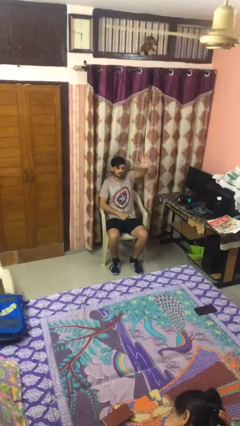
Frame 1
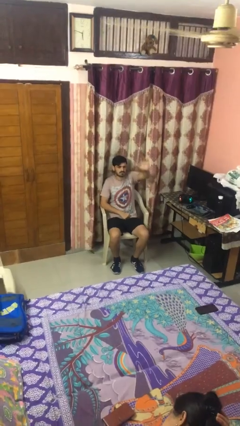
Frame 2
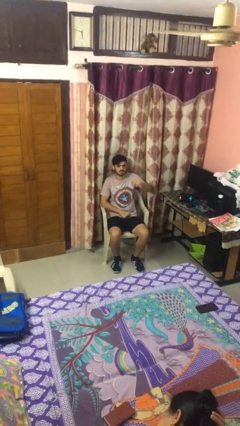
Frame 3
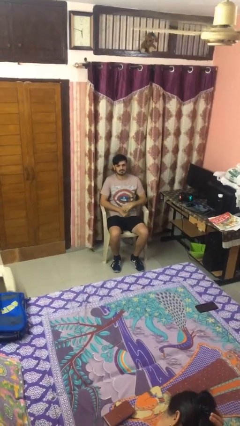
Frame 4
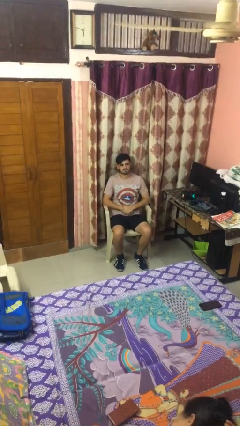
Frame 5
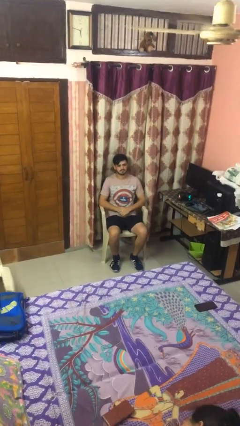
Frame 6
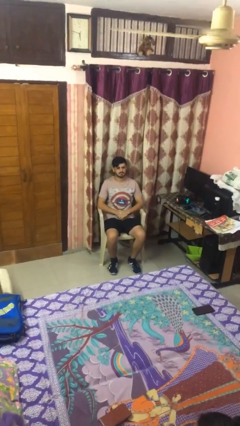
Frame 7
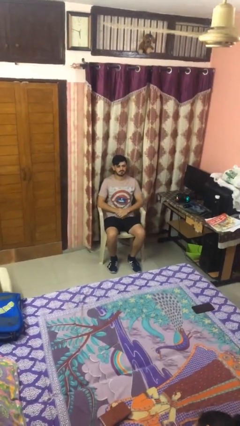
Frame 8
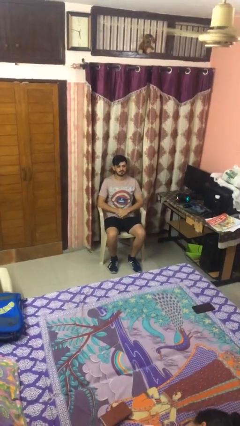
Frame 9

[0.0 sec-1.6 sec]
person gestures lower hand

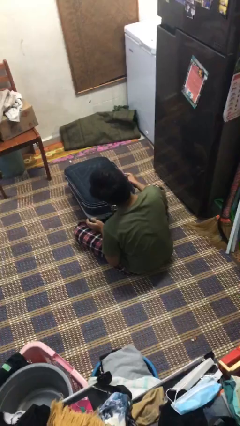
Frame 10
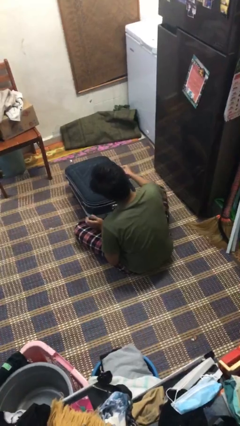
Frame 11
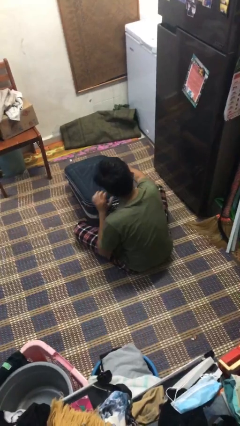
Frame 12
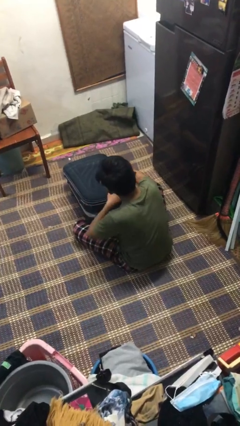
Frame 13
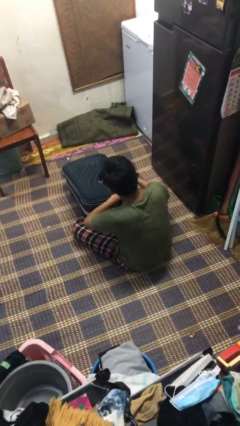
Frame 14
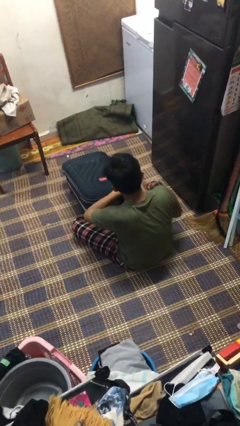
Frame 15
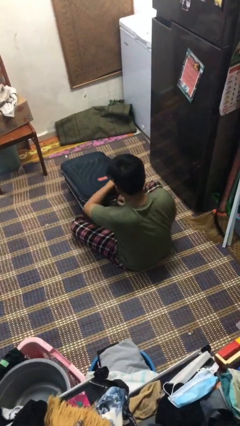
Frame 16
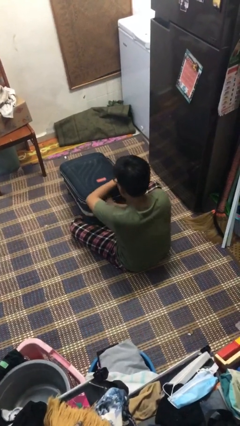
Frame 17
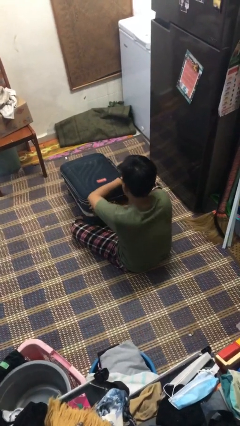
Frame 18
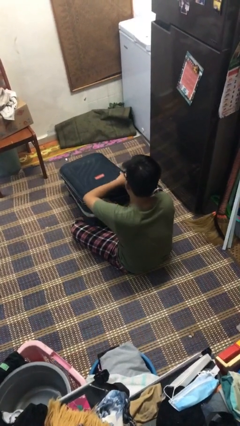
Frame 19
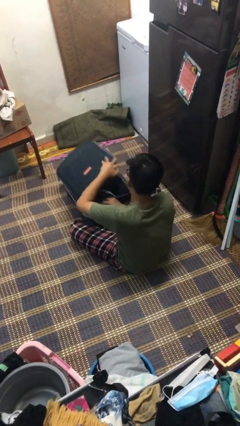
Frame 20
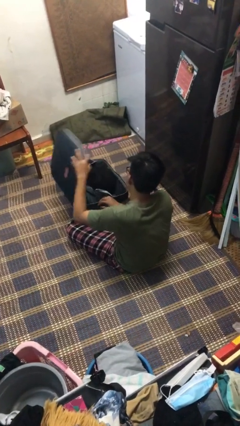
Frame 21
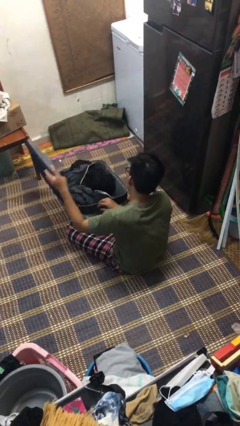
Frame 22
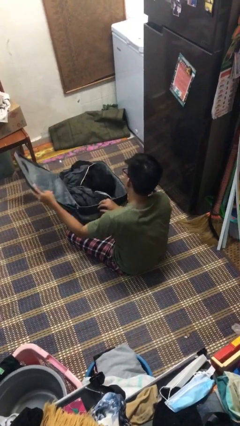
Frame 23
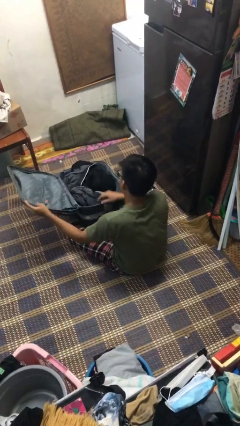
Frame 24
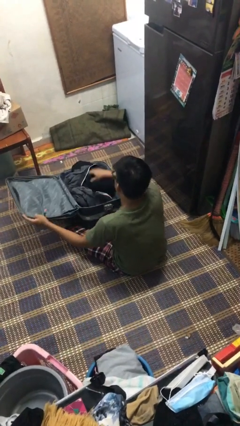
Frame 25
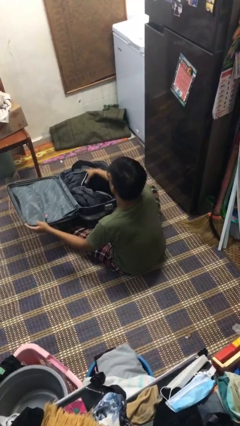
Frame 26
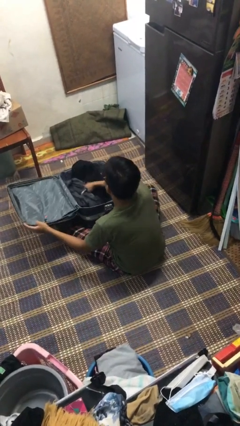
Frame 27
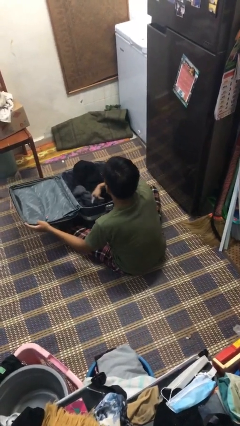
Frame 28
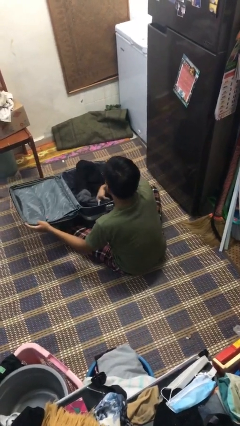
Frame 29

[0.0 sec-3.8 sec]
person opens suitcase

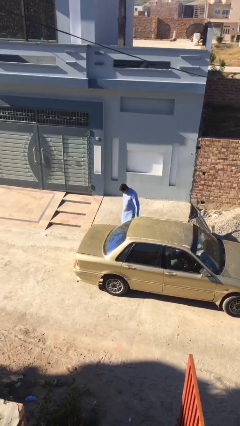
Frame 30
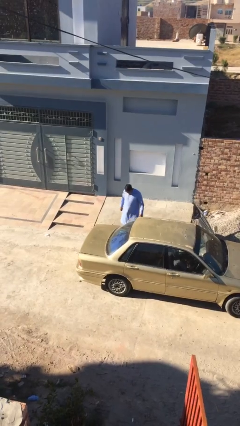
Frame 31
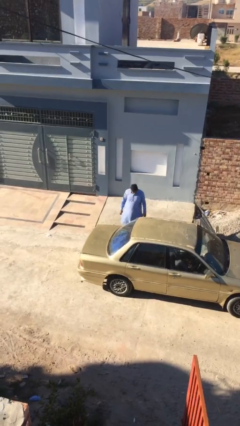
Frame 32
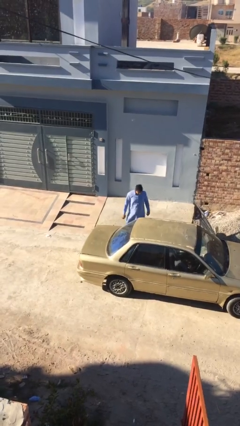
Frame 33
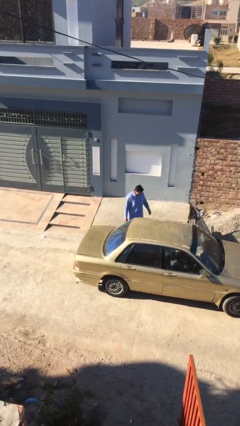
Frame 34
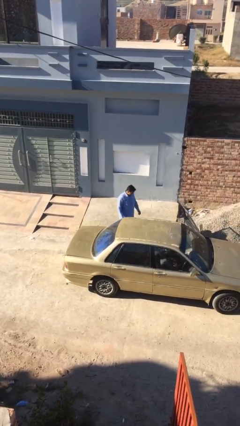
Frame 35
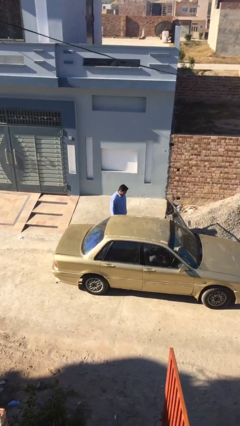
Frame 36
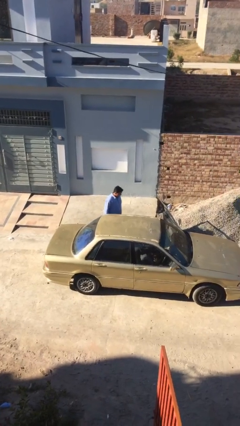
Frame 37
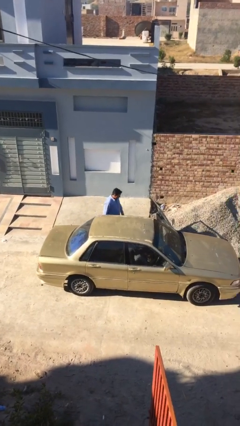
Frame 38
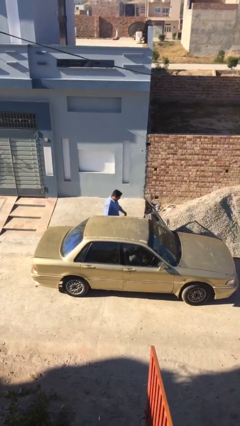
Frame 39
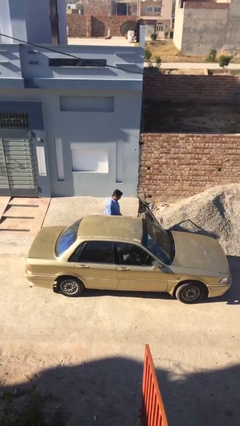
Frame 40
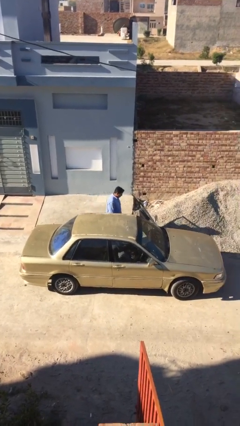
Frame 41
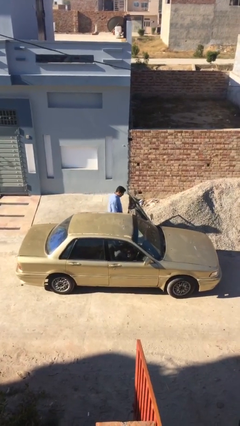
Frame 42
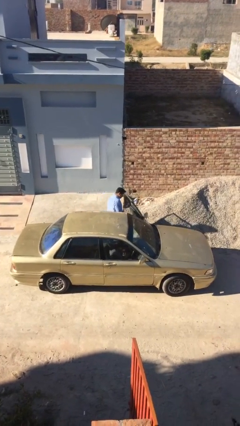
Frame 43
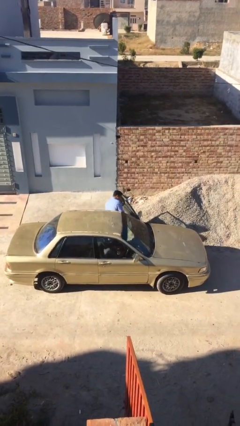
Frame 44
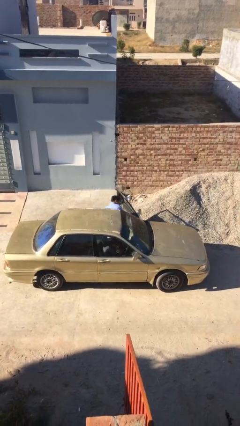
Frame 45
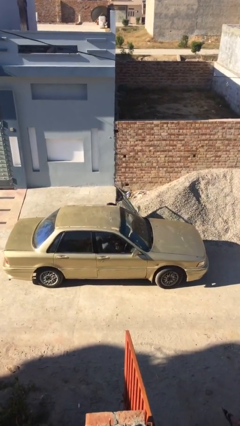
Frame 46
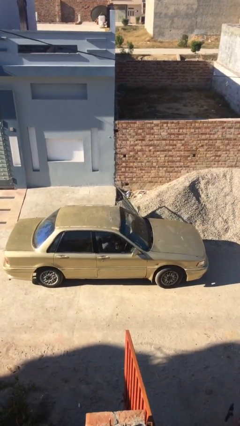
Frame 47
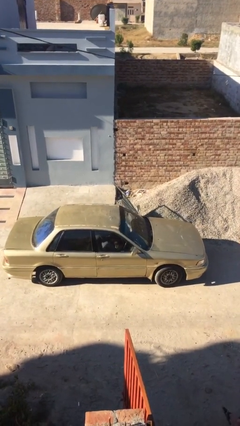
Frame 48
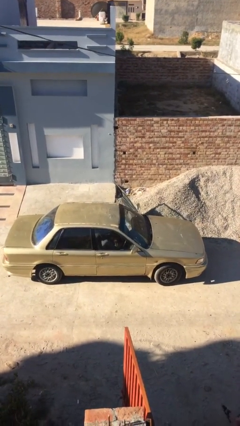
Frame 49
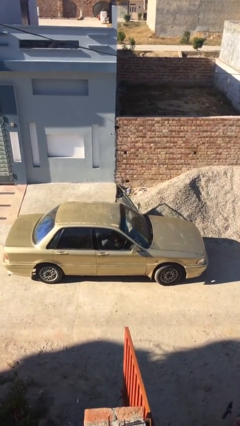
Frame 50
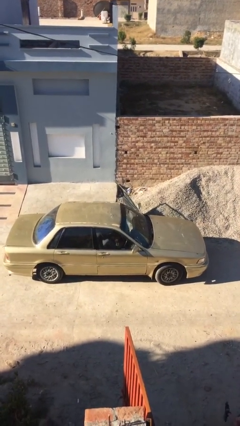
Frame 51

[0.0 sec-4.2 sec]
person enters car

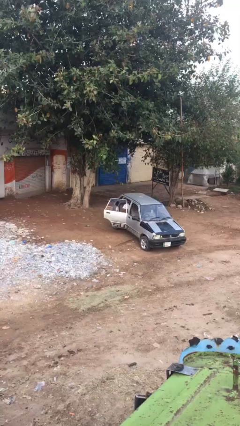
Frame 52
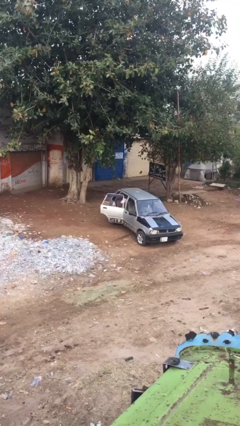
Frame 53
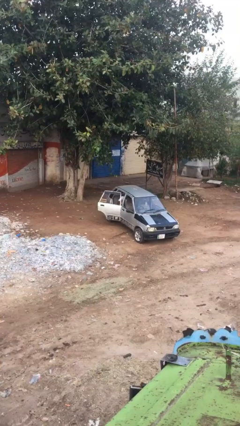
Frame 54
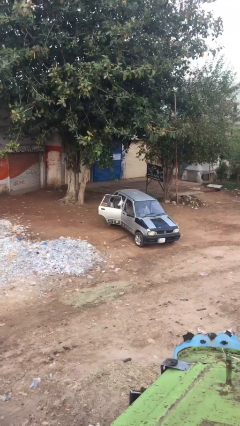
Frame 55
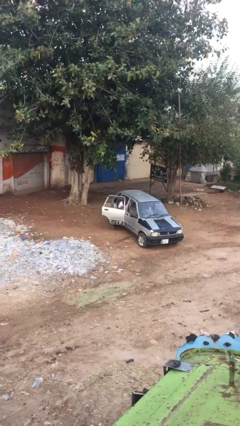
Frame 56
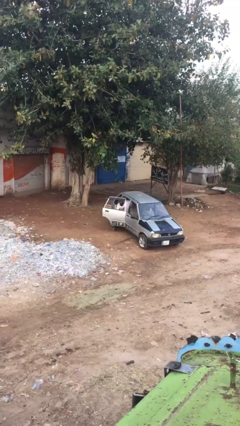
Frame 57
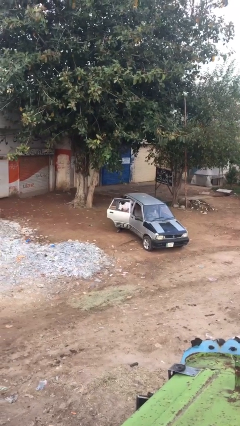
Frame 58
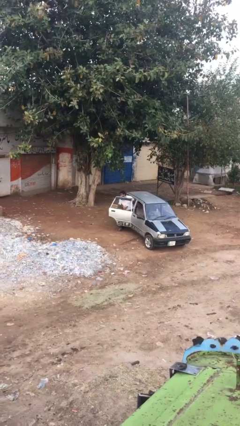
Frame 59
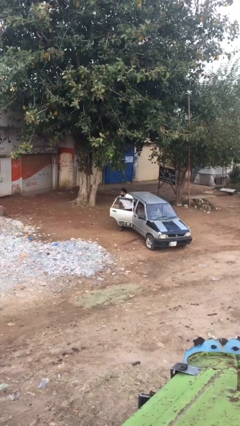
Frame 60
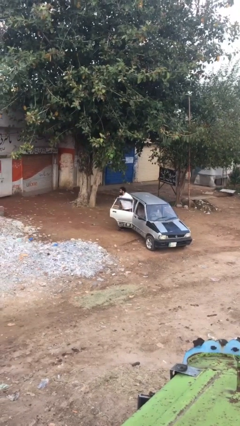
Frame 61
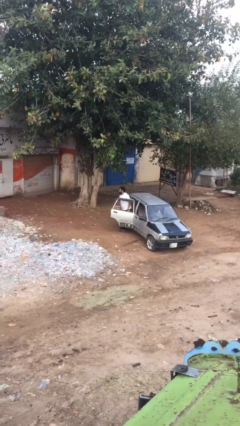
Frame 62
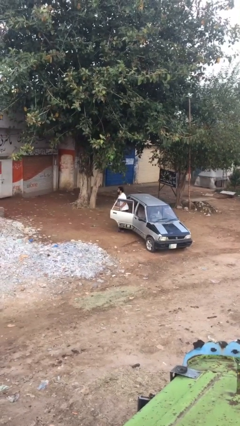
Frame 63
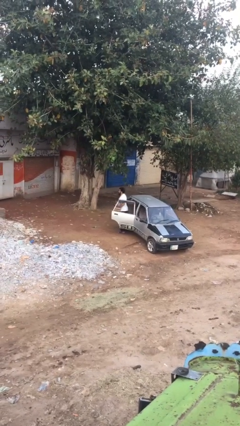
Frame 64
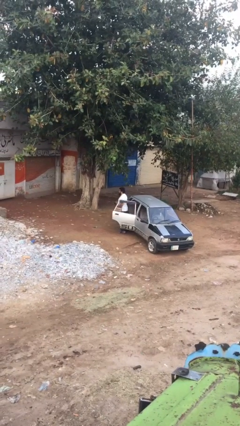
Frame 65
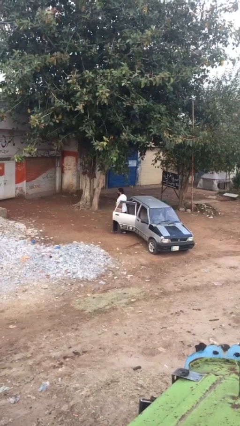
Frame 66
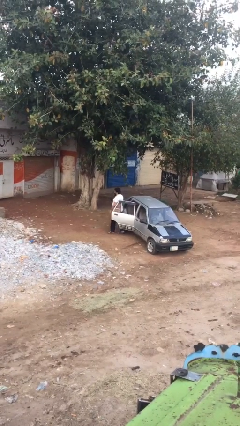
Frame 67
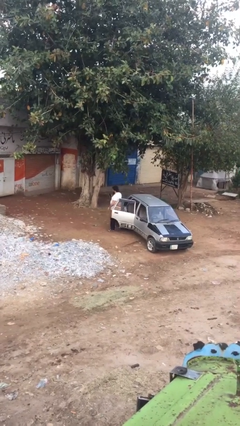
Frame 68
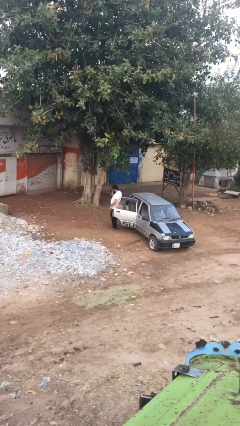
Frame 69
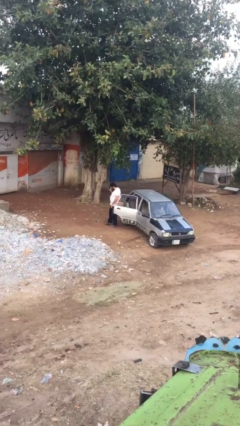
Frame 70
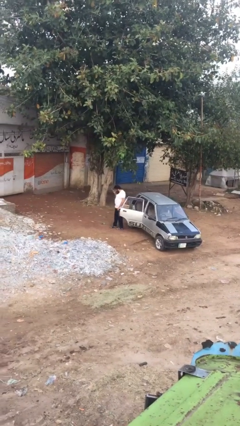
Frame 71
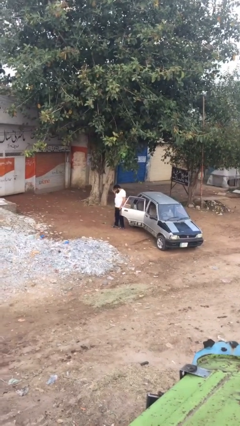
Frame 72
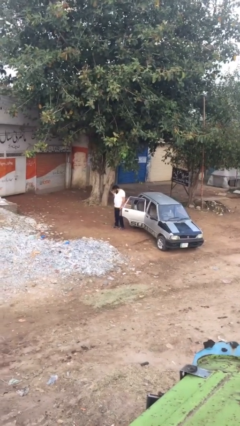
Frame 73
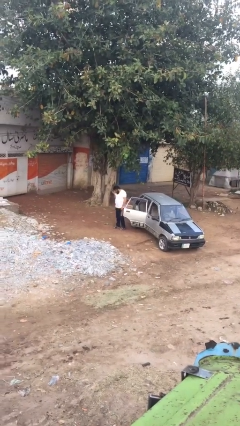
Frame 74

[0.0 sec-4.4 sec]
person exits car

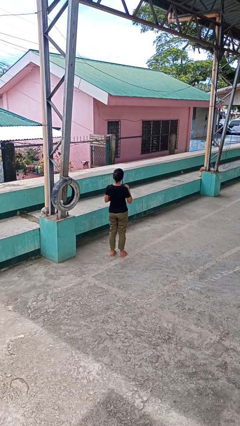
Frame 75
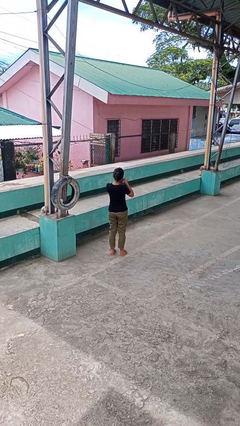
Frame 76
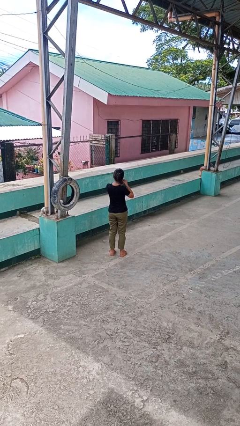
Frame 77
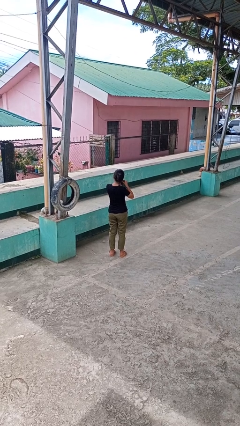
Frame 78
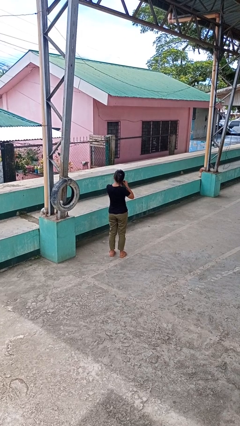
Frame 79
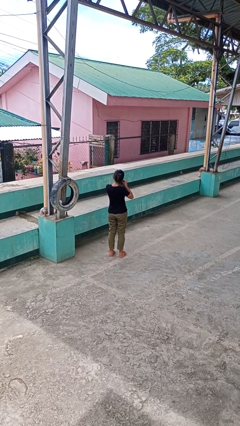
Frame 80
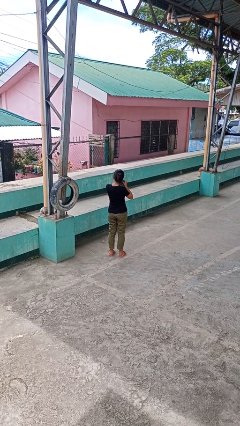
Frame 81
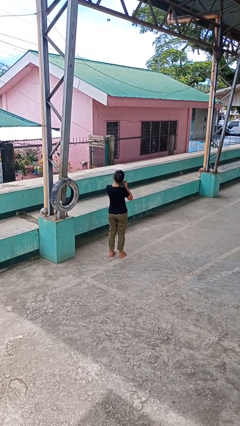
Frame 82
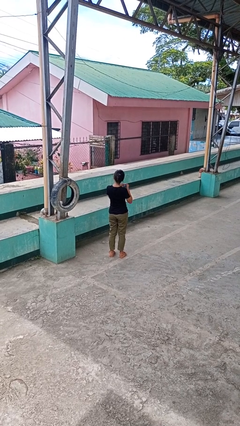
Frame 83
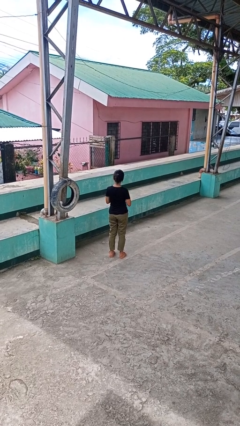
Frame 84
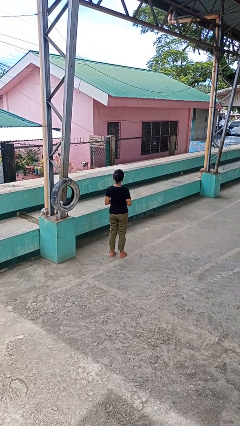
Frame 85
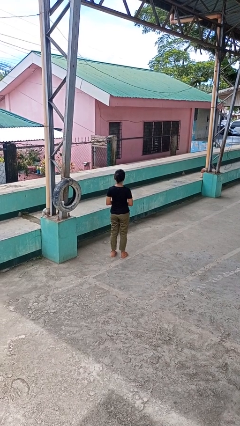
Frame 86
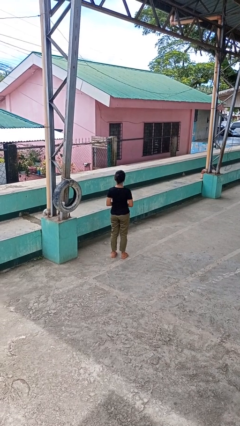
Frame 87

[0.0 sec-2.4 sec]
person takes off earrings

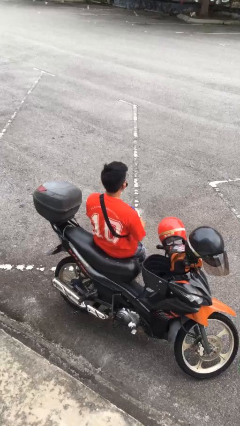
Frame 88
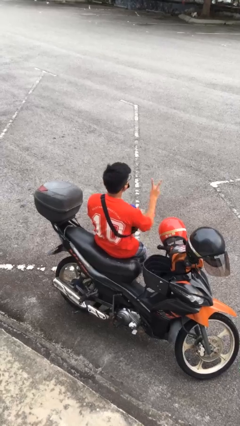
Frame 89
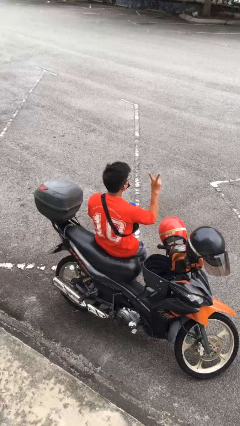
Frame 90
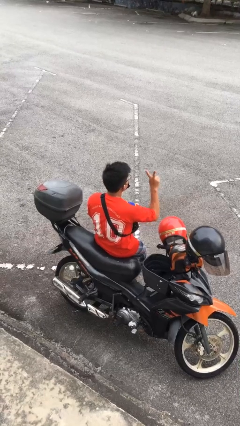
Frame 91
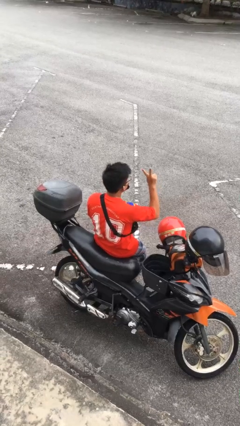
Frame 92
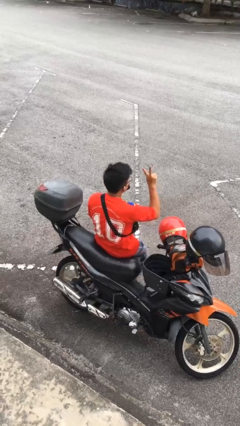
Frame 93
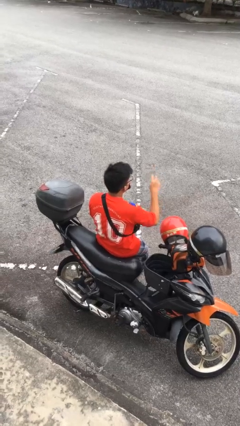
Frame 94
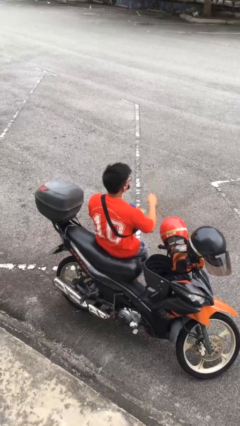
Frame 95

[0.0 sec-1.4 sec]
person gestures peace
